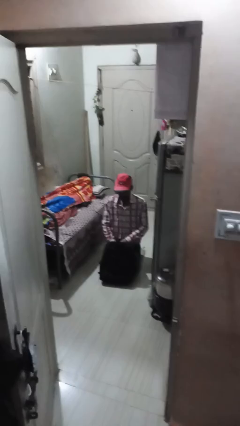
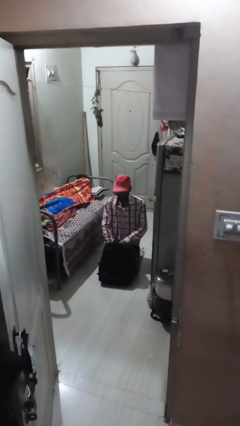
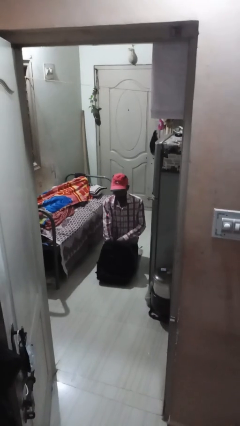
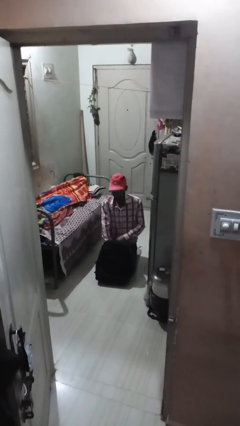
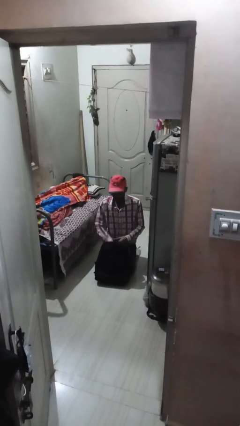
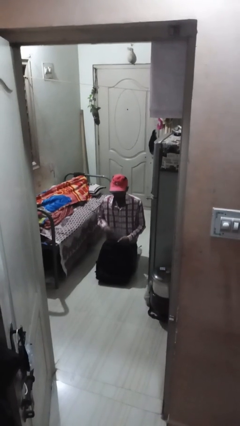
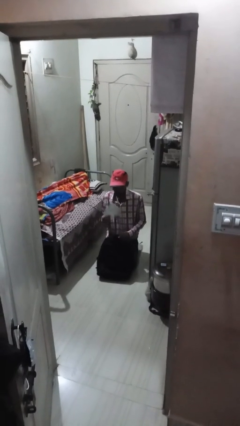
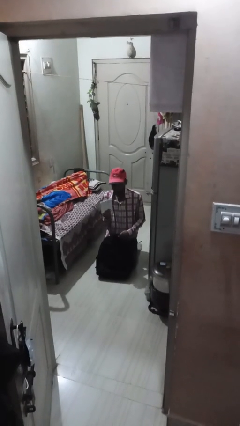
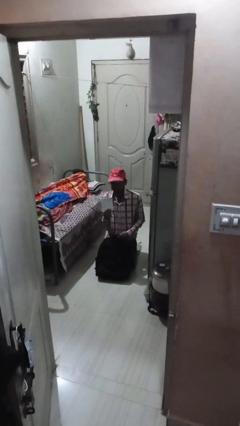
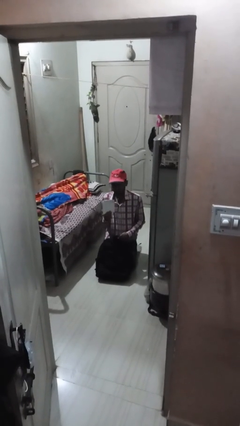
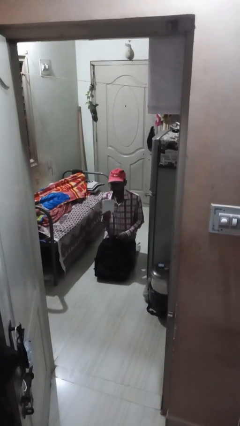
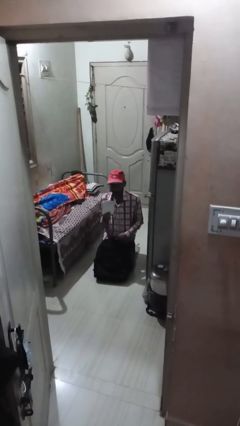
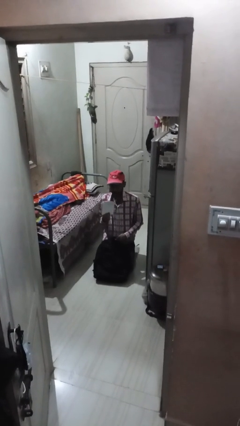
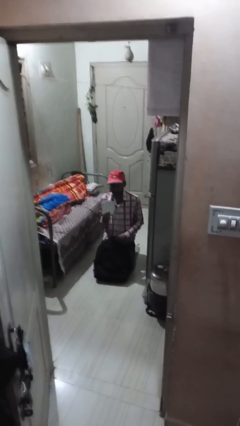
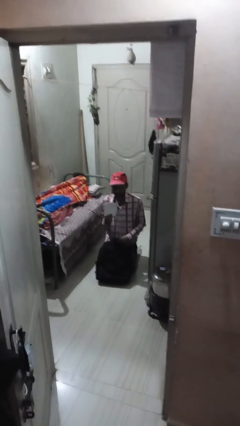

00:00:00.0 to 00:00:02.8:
person takes object from backpack

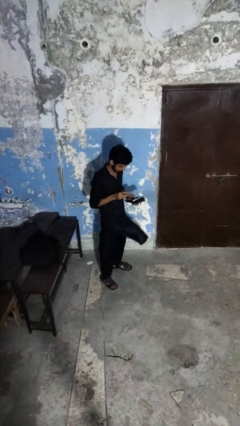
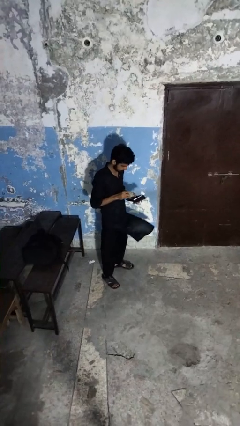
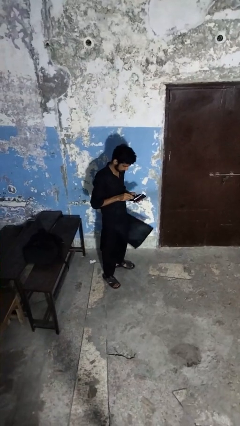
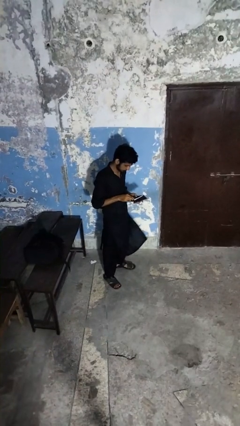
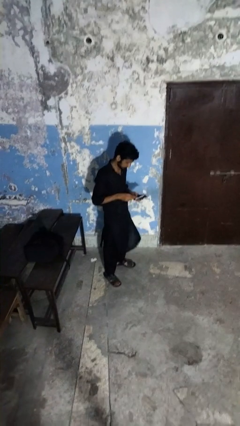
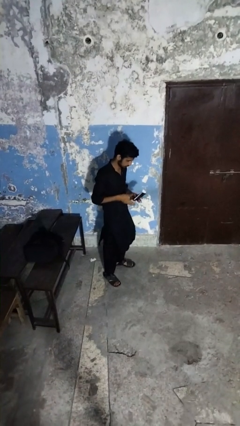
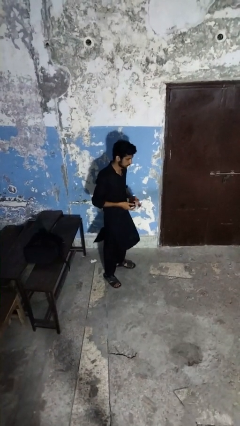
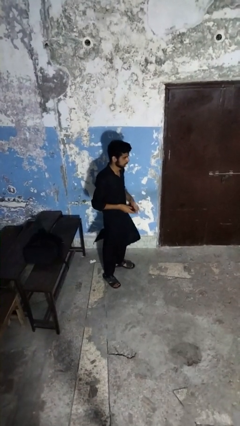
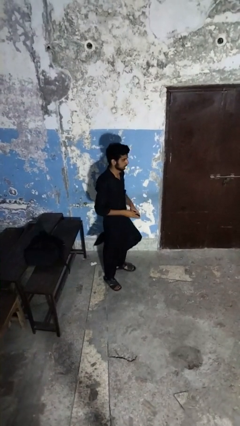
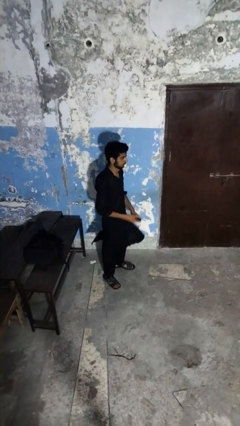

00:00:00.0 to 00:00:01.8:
person puts object into purse

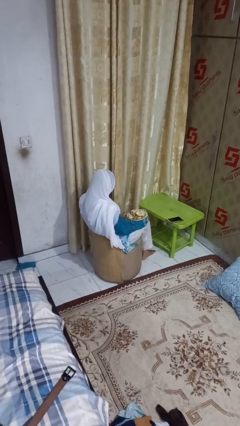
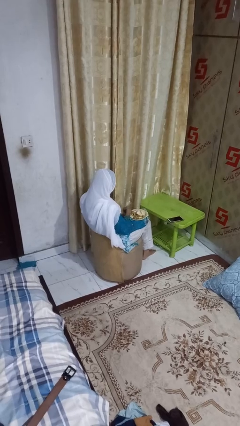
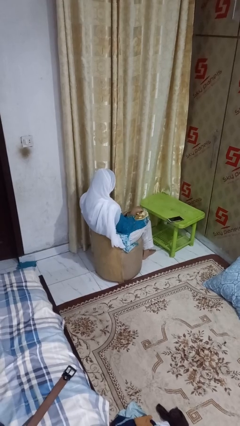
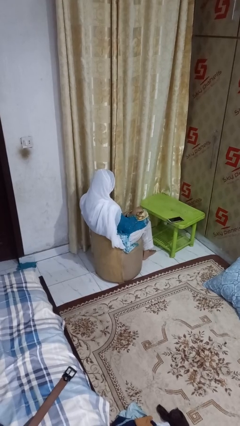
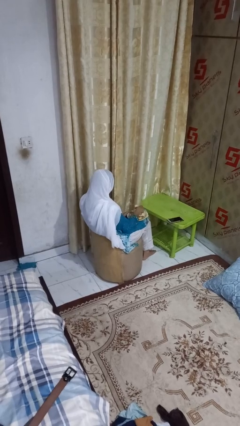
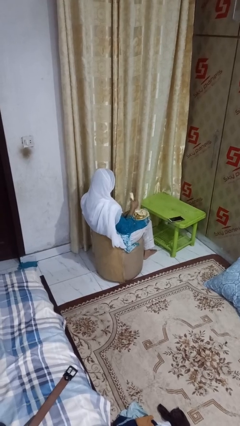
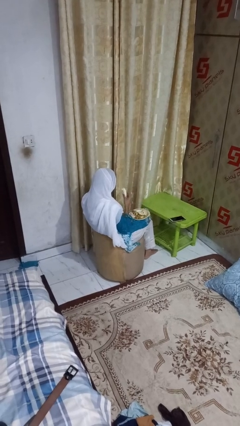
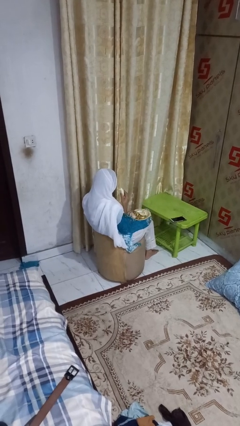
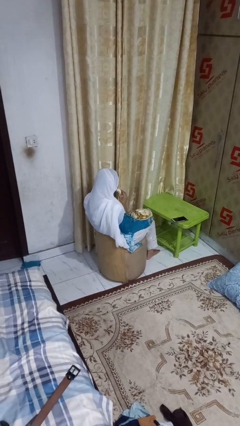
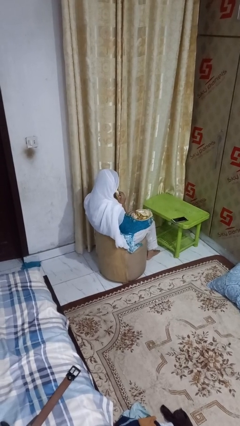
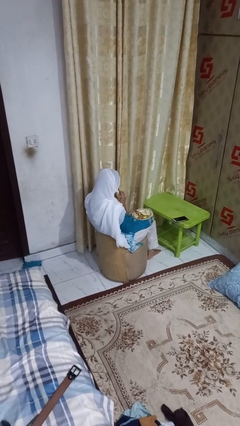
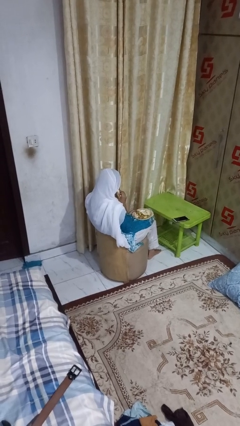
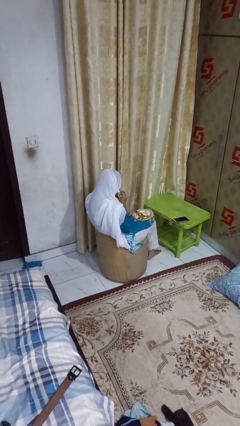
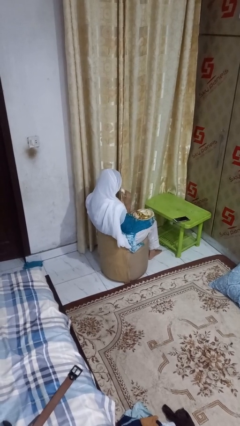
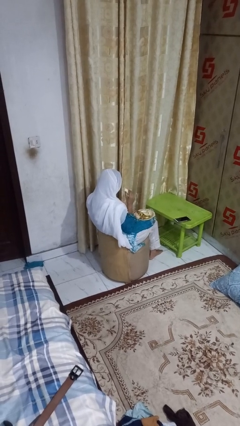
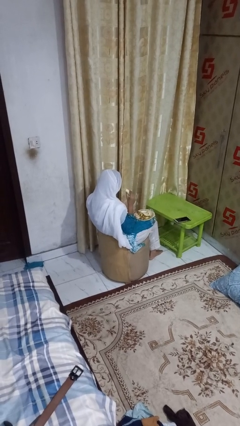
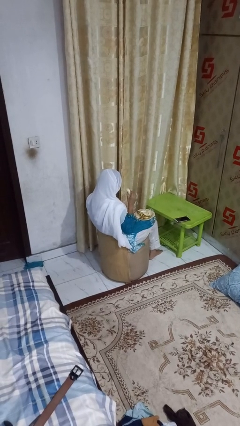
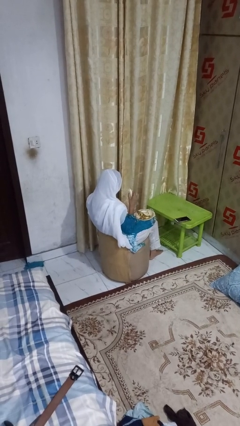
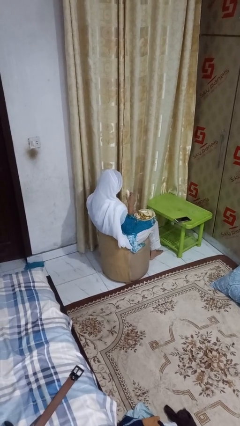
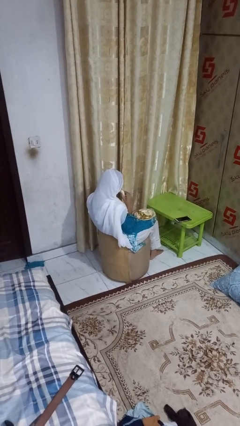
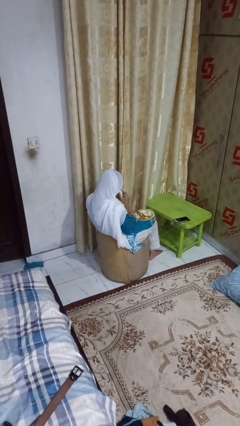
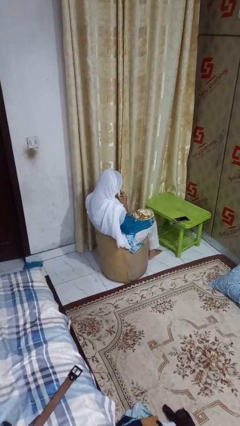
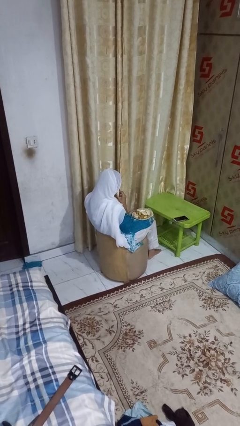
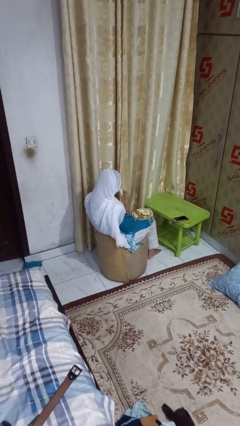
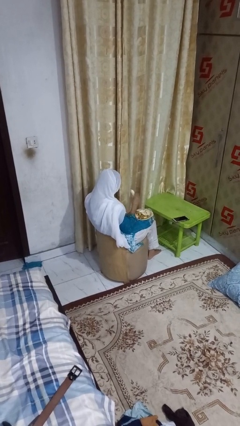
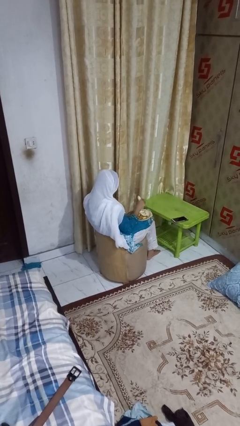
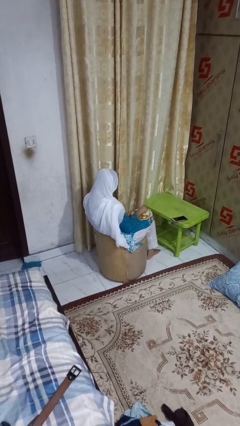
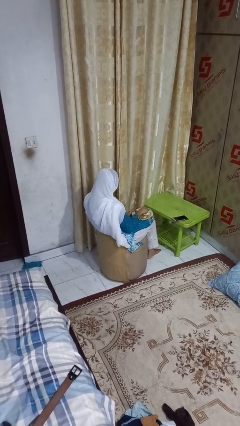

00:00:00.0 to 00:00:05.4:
person eats with hands

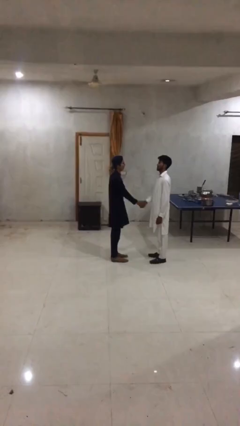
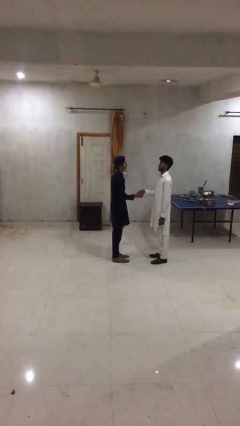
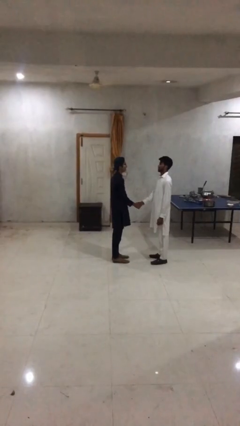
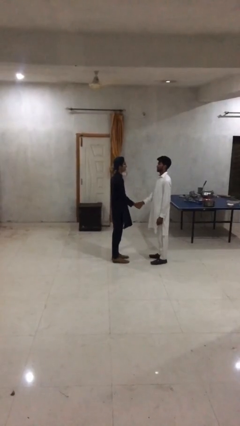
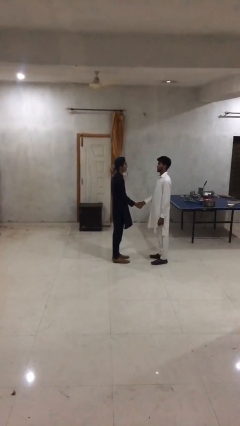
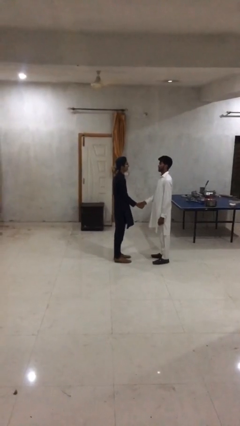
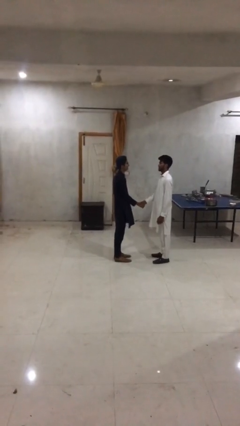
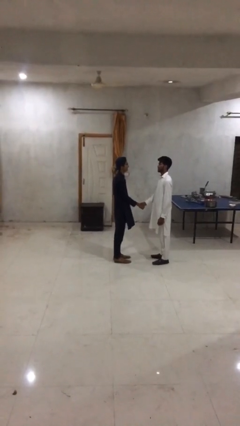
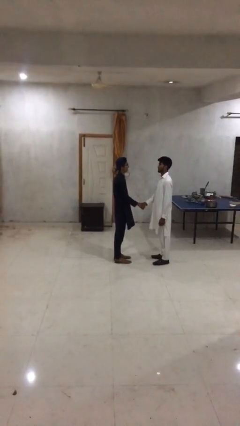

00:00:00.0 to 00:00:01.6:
person shakes hand

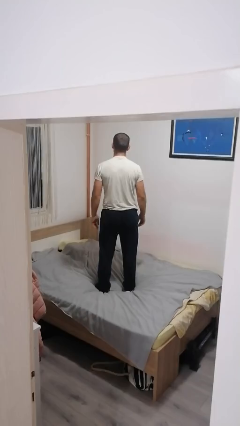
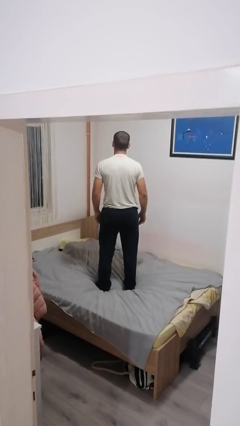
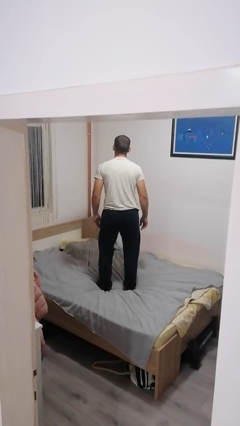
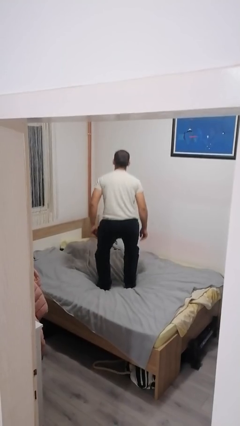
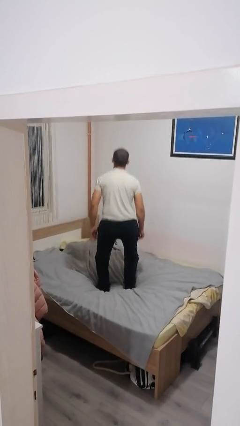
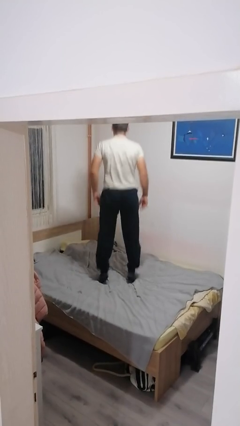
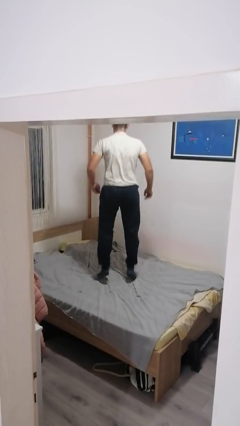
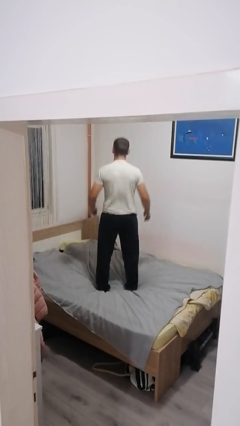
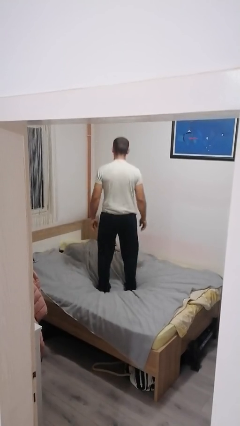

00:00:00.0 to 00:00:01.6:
person jumps on bed

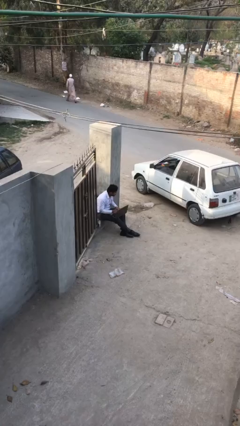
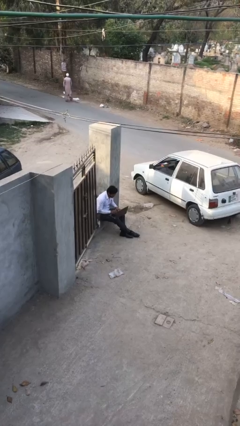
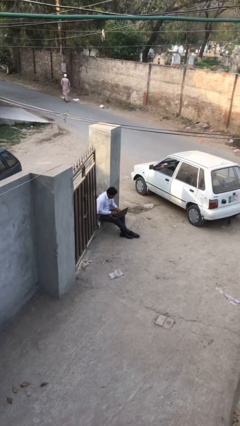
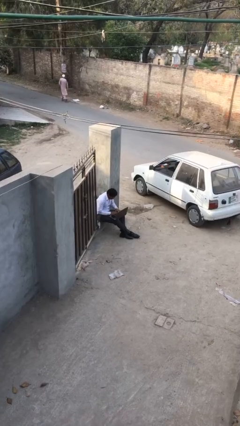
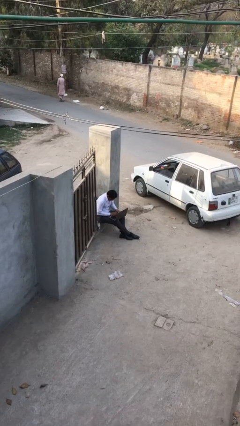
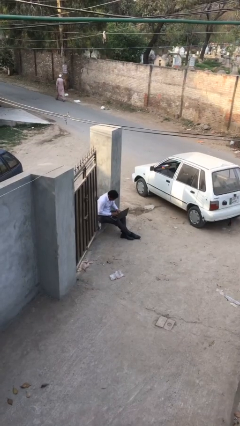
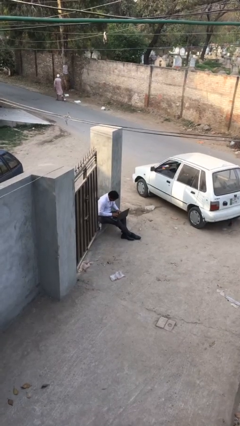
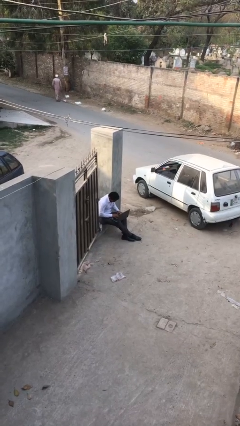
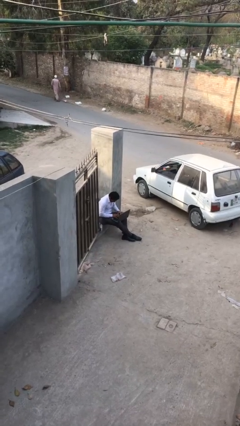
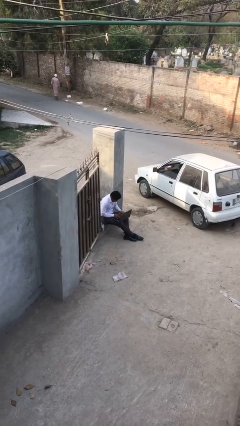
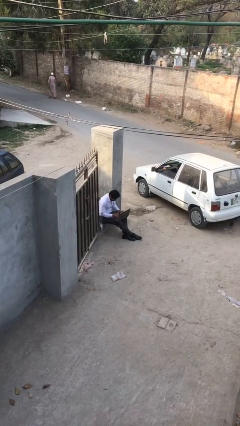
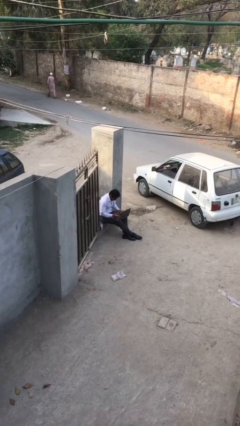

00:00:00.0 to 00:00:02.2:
person interacts with laptop

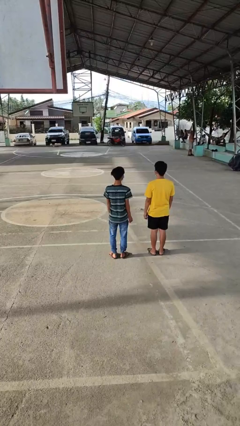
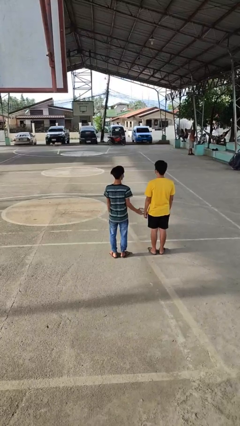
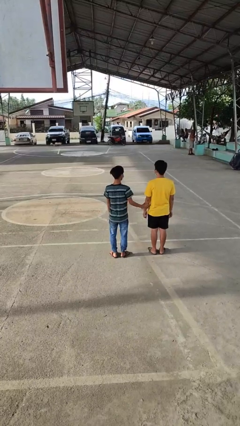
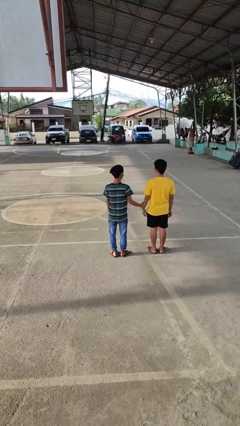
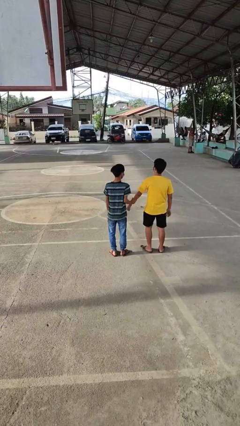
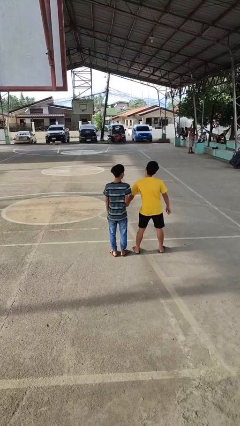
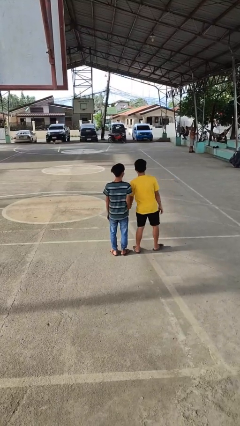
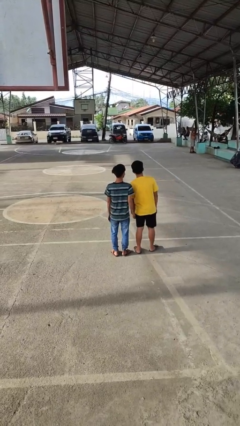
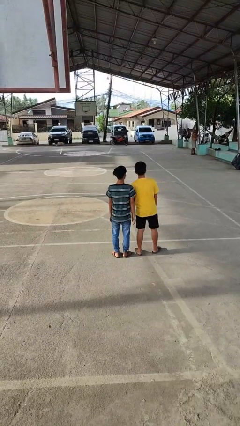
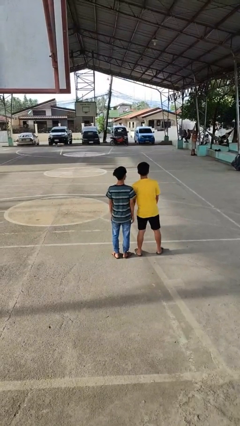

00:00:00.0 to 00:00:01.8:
person grabs person by forearm
